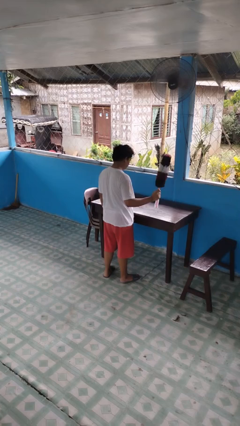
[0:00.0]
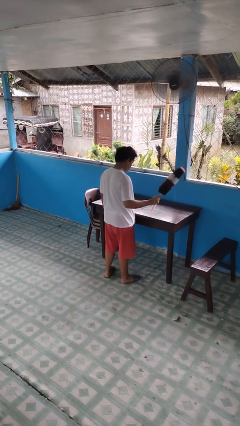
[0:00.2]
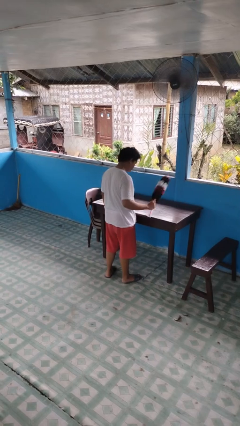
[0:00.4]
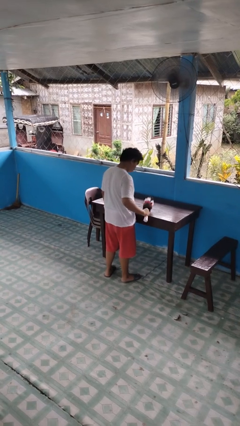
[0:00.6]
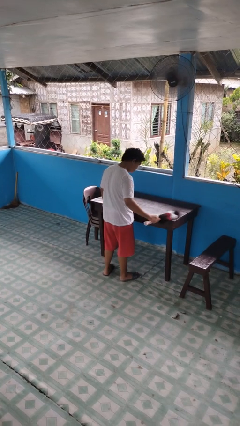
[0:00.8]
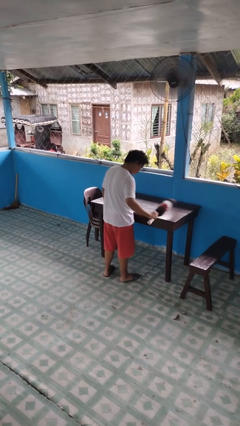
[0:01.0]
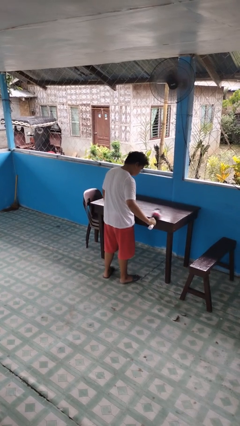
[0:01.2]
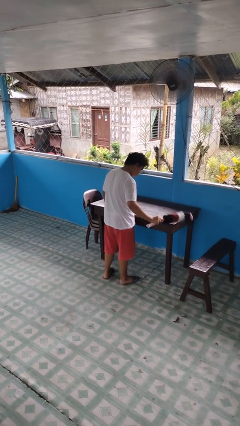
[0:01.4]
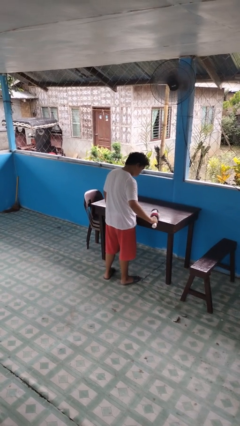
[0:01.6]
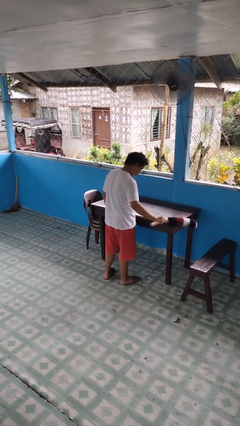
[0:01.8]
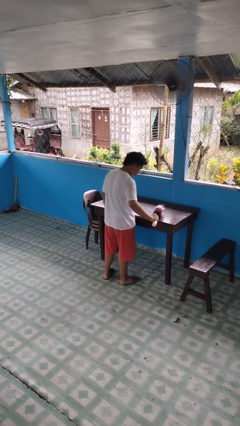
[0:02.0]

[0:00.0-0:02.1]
person dusts furniture

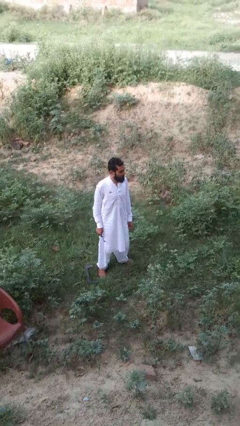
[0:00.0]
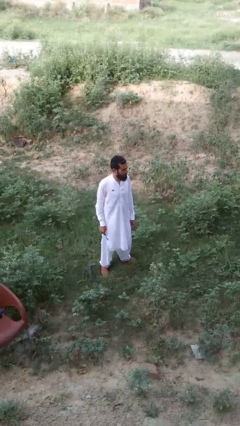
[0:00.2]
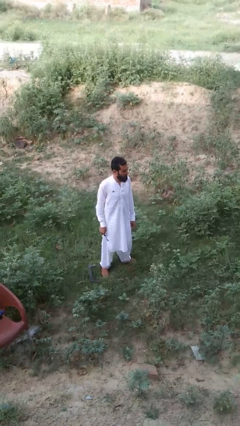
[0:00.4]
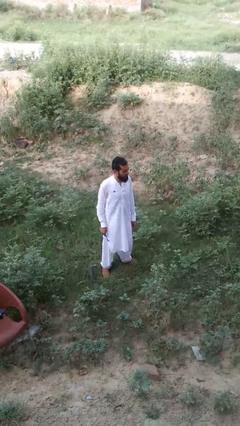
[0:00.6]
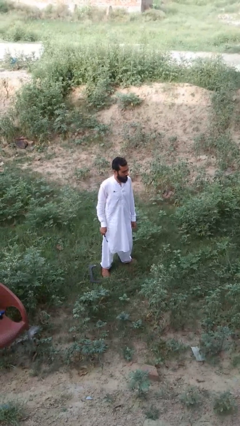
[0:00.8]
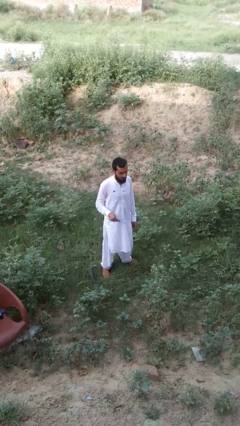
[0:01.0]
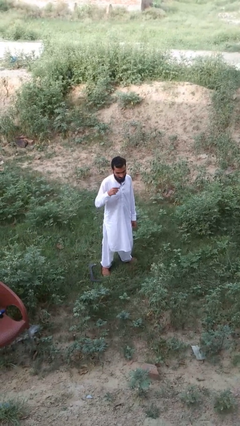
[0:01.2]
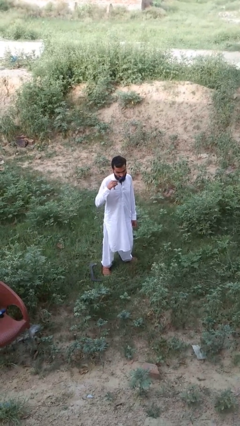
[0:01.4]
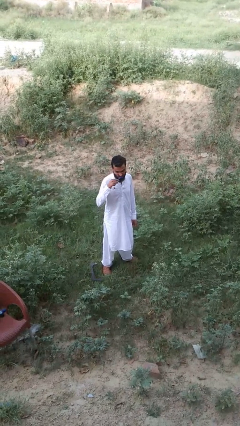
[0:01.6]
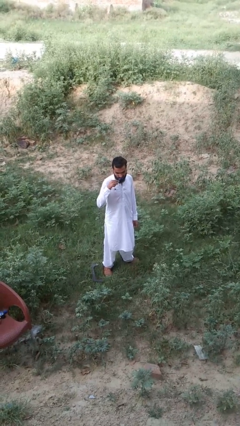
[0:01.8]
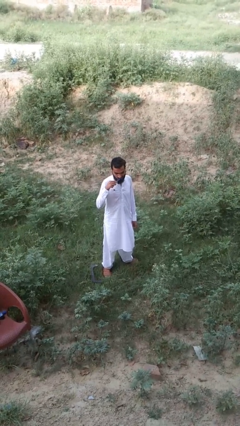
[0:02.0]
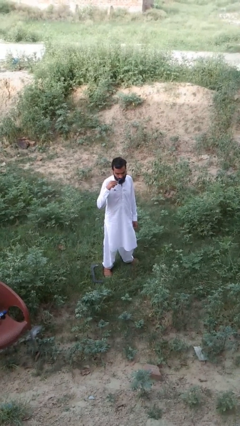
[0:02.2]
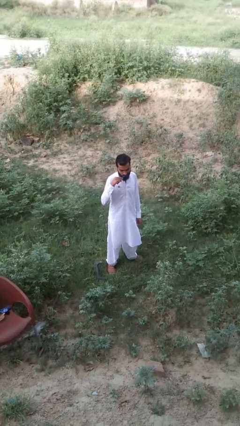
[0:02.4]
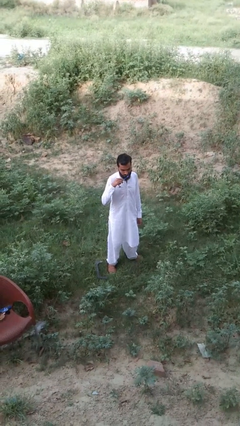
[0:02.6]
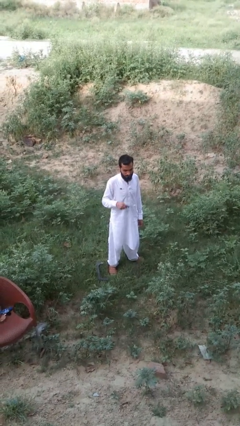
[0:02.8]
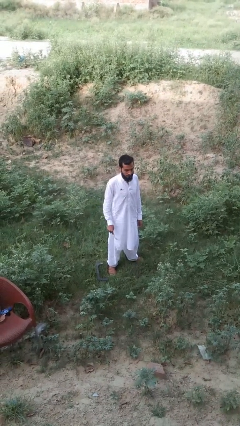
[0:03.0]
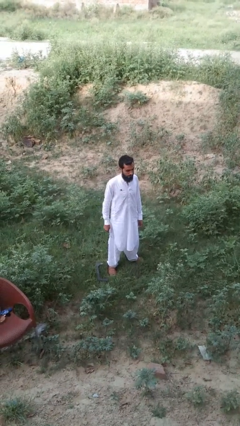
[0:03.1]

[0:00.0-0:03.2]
person brushes teeth

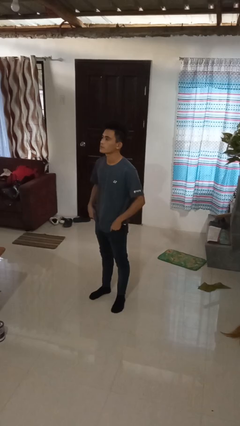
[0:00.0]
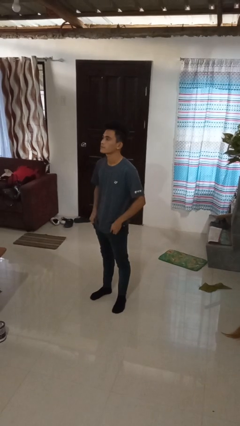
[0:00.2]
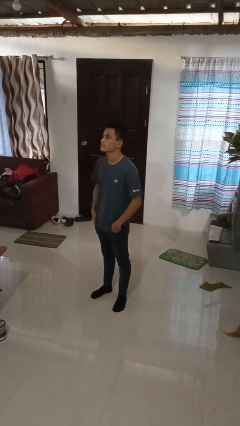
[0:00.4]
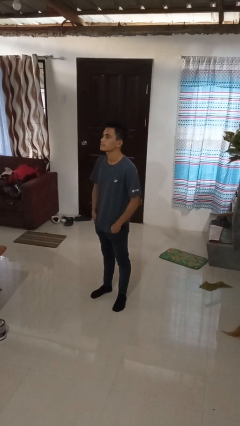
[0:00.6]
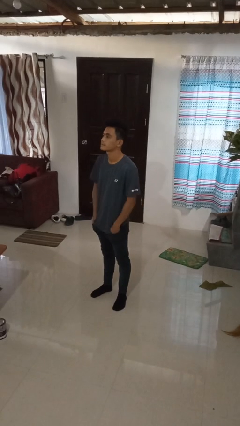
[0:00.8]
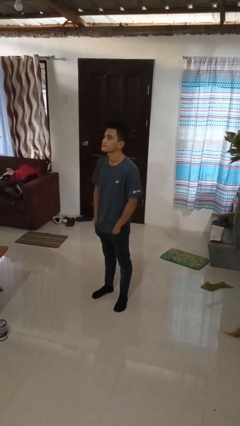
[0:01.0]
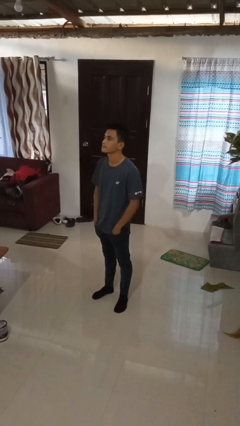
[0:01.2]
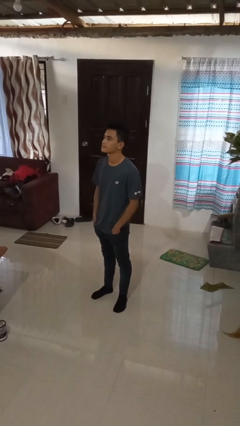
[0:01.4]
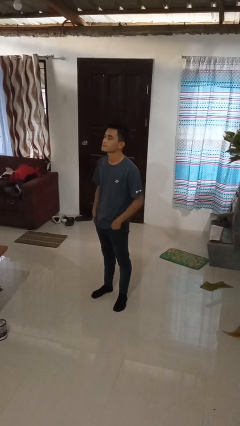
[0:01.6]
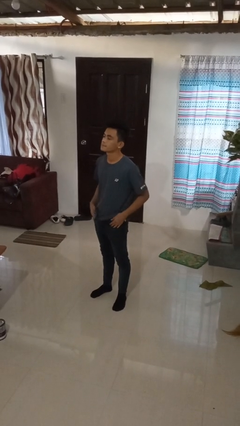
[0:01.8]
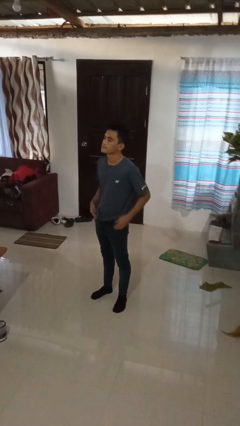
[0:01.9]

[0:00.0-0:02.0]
person puts hands in back pockets

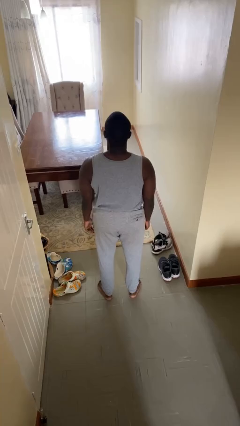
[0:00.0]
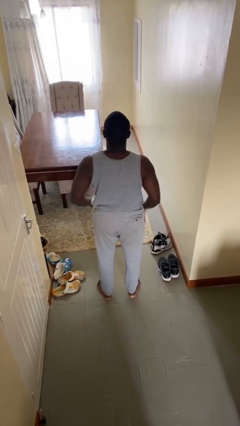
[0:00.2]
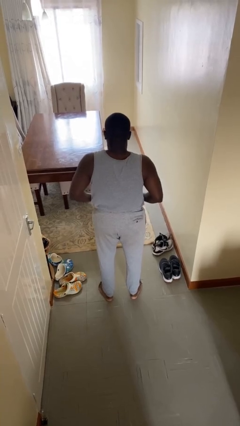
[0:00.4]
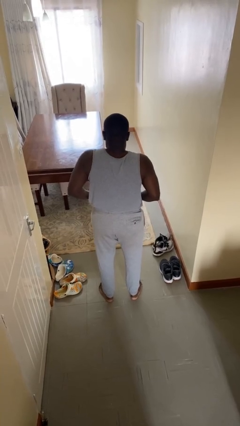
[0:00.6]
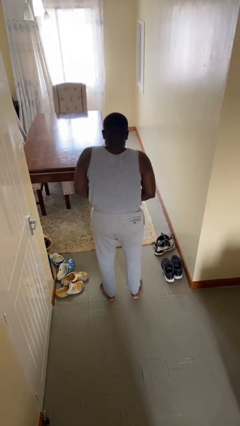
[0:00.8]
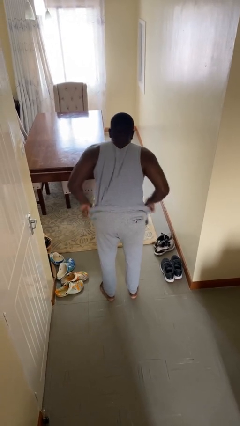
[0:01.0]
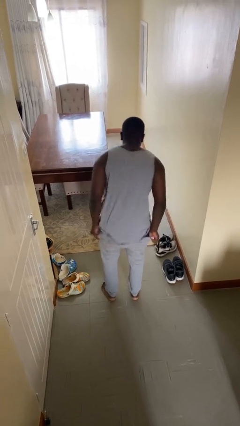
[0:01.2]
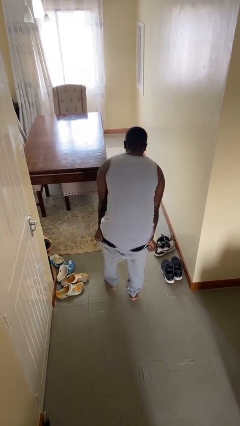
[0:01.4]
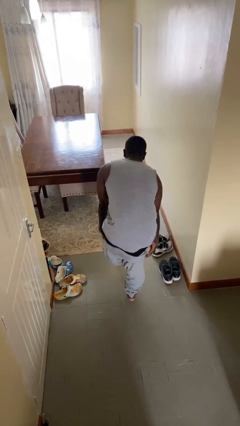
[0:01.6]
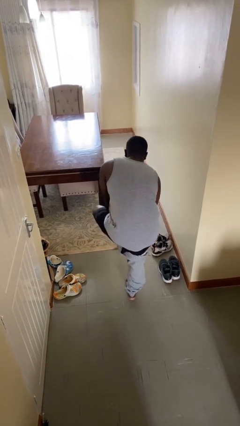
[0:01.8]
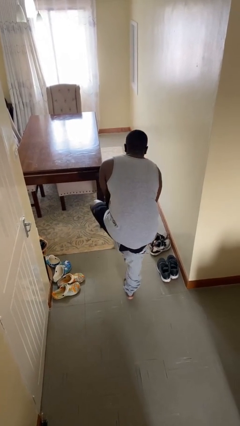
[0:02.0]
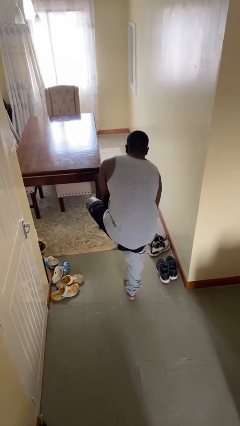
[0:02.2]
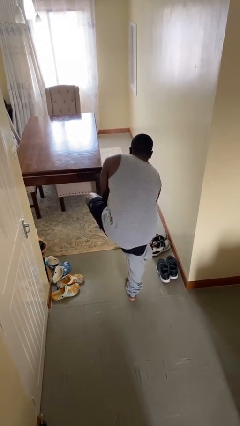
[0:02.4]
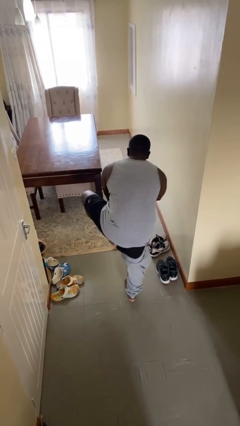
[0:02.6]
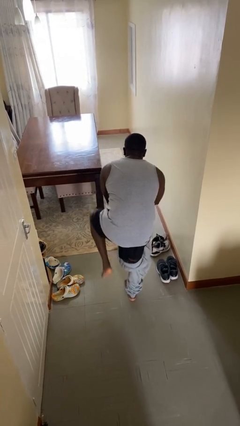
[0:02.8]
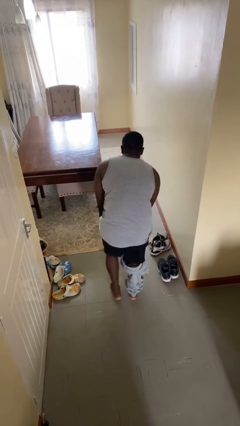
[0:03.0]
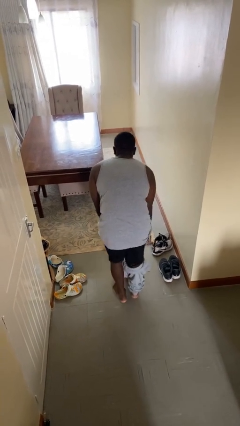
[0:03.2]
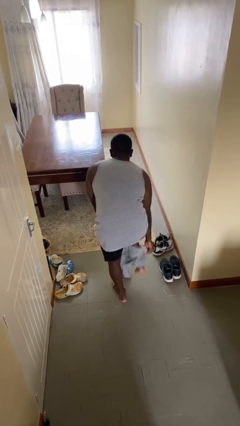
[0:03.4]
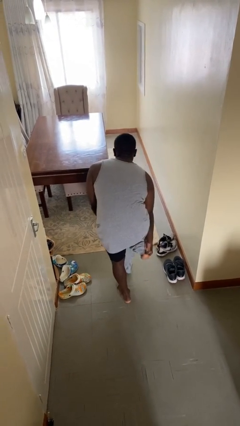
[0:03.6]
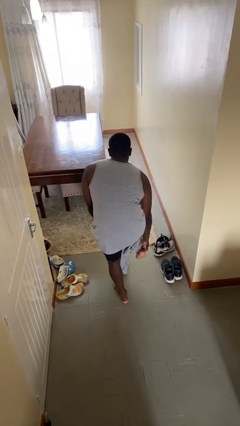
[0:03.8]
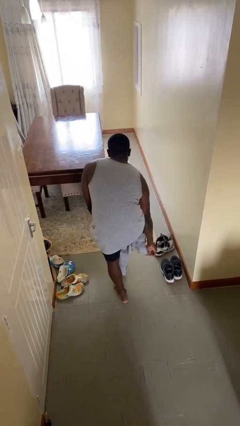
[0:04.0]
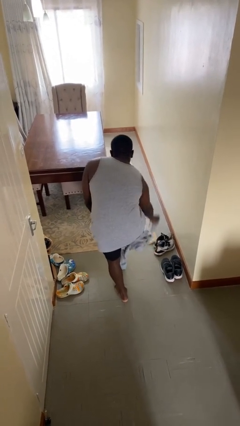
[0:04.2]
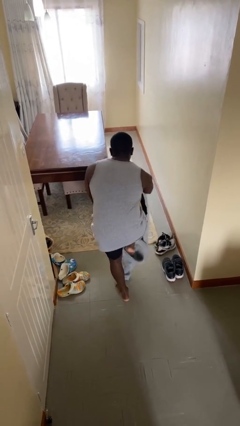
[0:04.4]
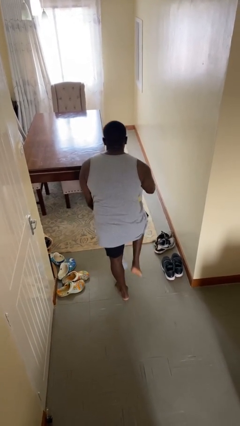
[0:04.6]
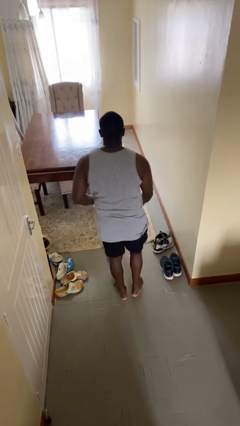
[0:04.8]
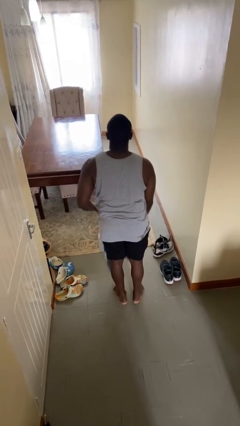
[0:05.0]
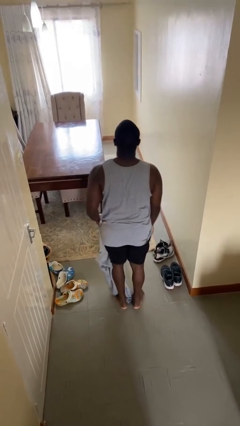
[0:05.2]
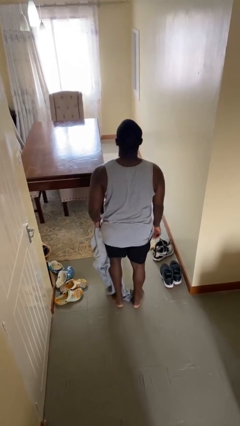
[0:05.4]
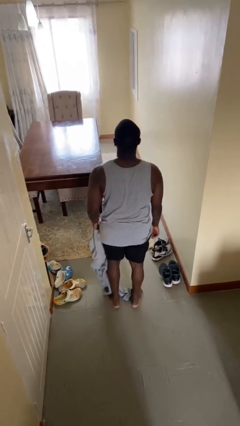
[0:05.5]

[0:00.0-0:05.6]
person takes off pants

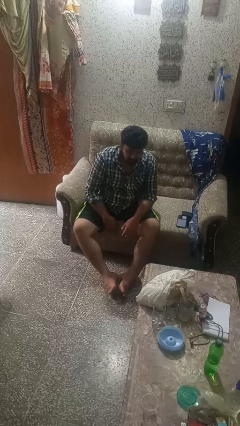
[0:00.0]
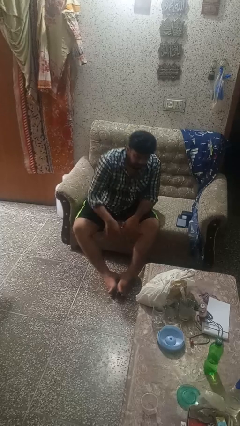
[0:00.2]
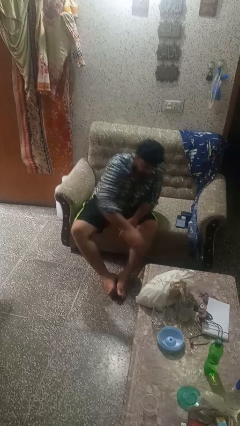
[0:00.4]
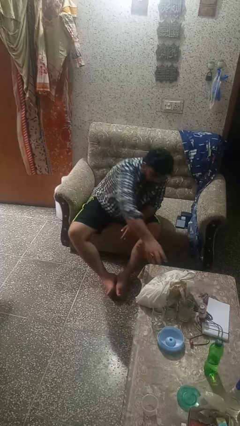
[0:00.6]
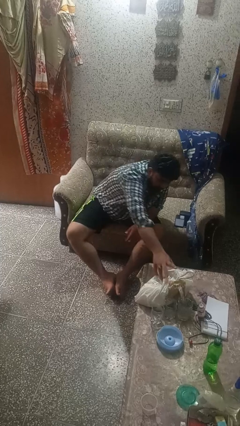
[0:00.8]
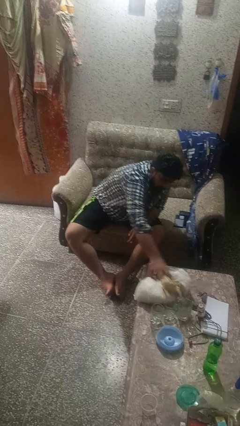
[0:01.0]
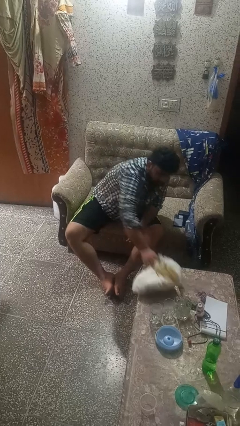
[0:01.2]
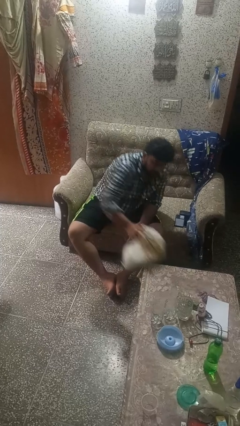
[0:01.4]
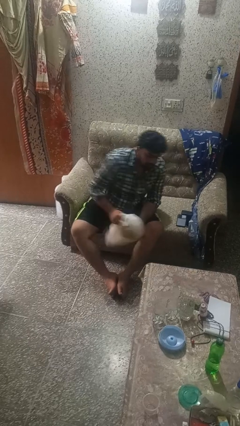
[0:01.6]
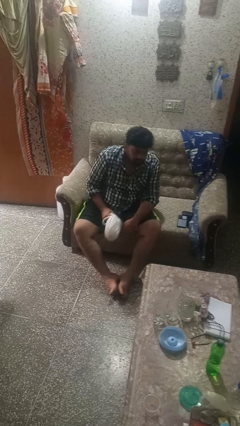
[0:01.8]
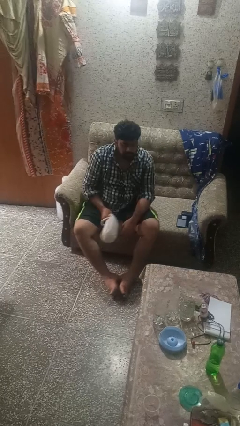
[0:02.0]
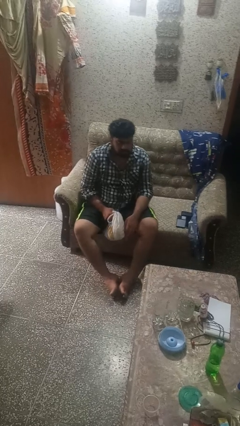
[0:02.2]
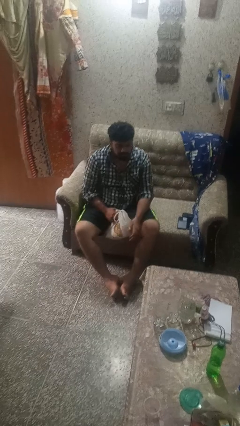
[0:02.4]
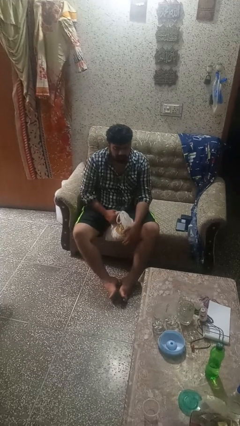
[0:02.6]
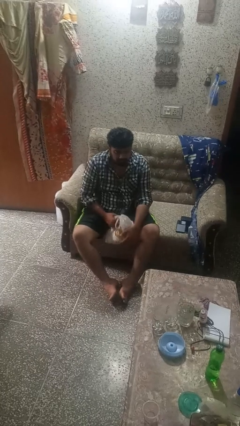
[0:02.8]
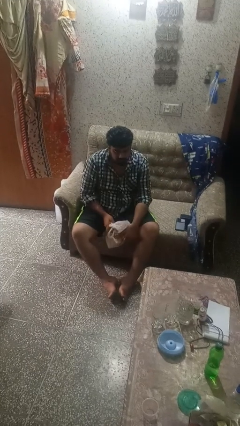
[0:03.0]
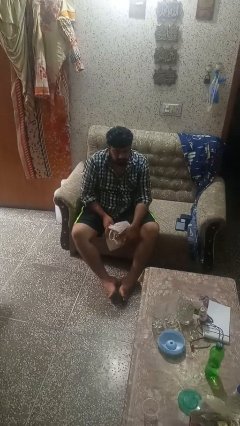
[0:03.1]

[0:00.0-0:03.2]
person picks up object from table

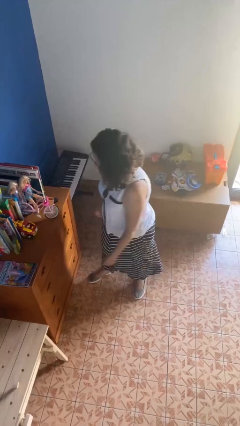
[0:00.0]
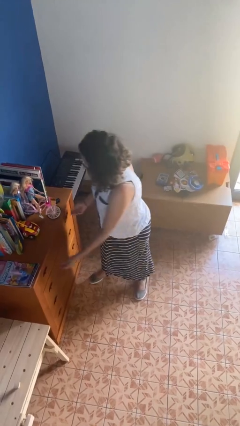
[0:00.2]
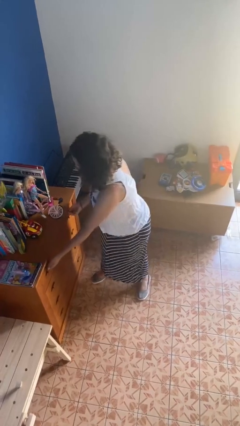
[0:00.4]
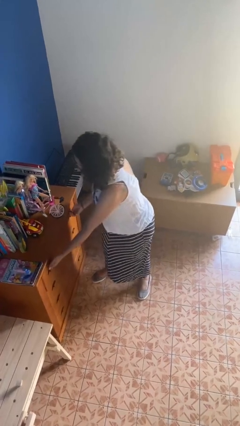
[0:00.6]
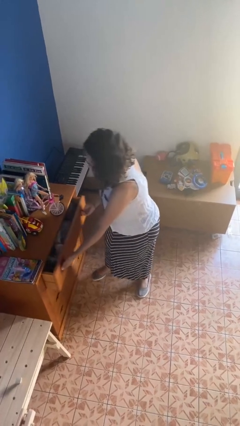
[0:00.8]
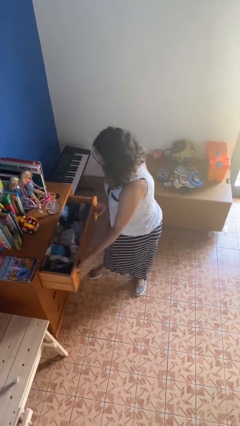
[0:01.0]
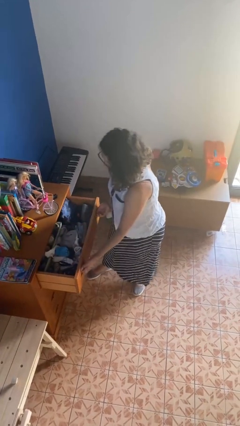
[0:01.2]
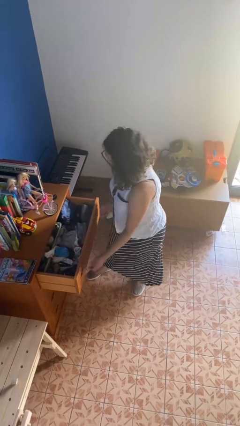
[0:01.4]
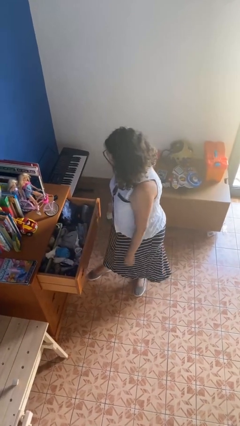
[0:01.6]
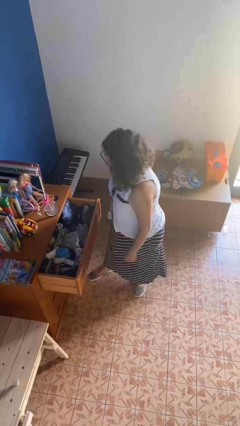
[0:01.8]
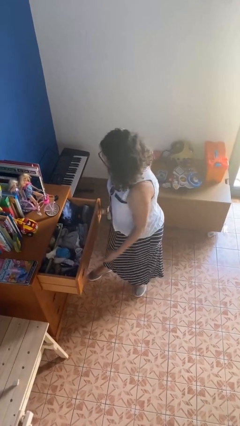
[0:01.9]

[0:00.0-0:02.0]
person opens dresser drawer
